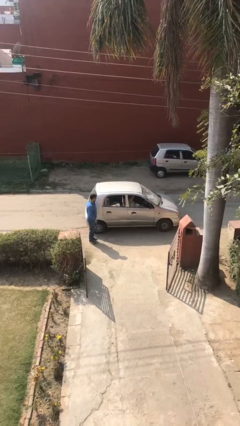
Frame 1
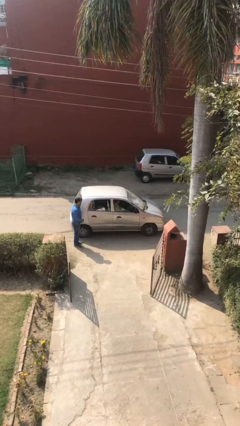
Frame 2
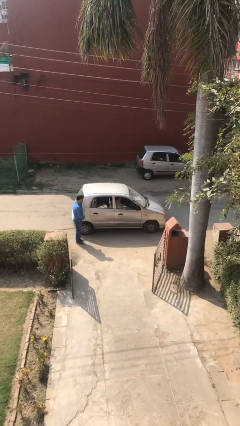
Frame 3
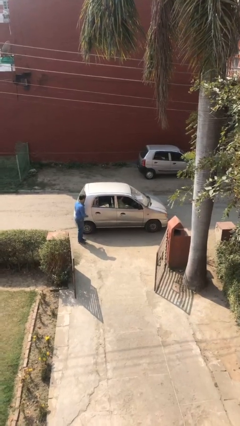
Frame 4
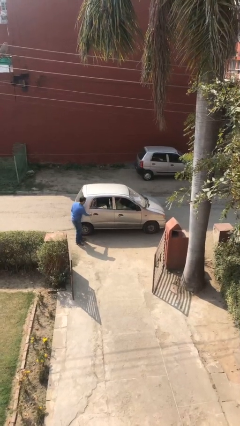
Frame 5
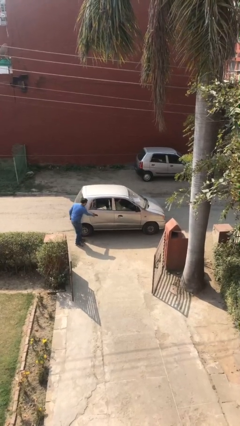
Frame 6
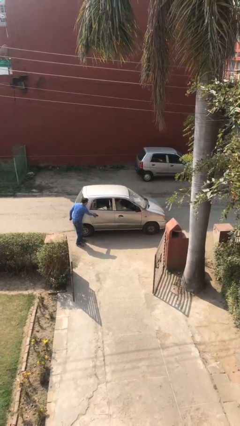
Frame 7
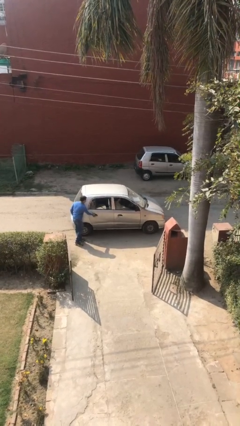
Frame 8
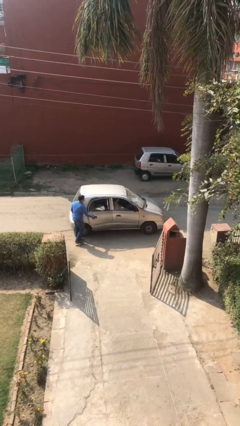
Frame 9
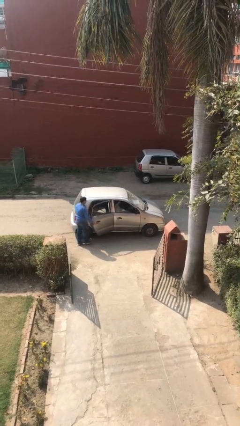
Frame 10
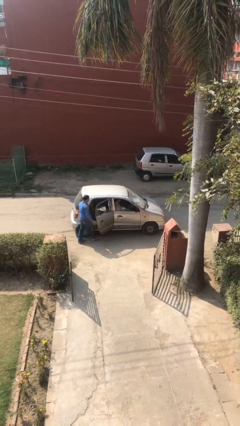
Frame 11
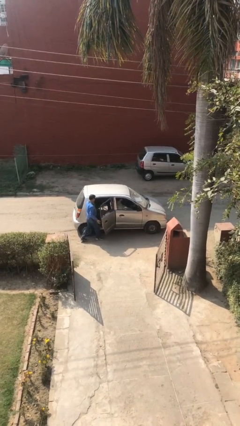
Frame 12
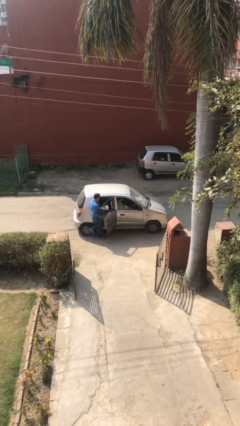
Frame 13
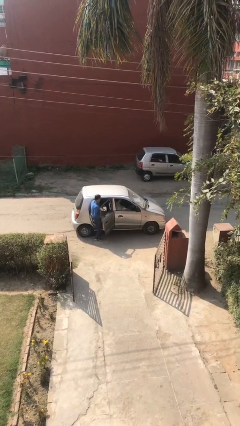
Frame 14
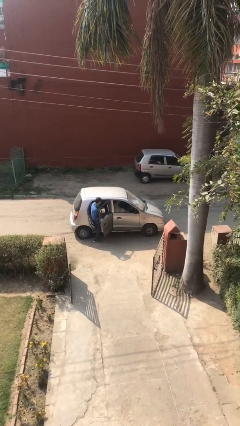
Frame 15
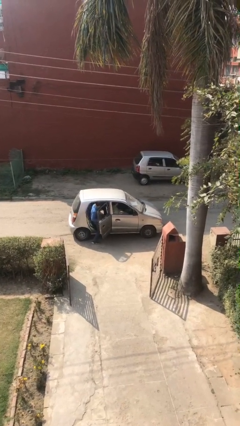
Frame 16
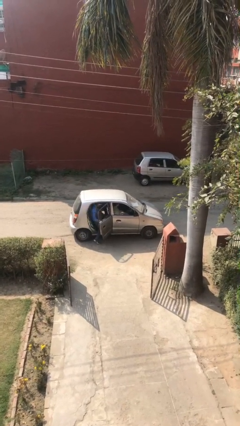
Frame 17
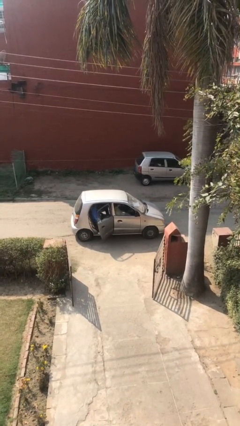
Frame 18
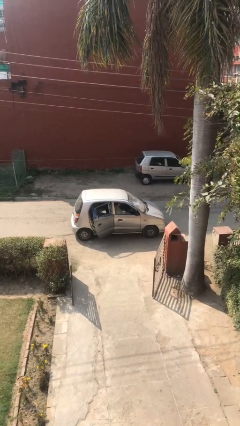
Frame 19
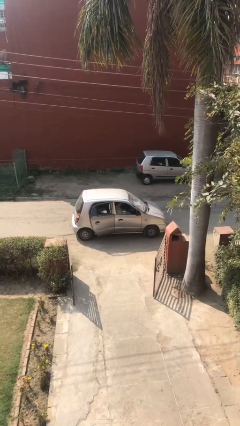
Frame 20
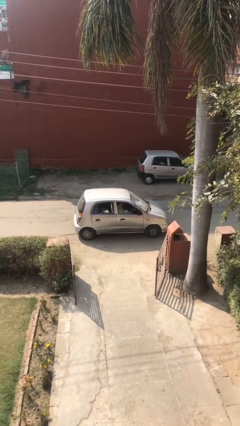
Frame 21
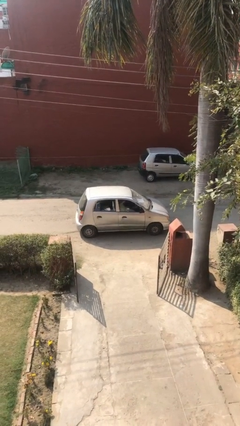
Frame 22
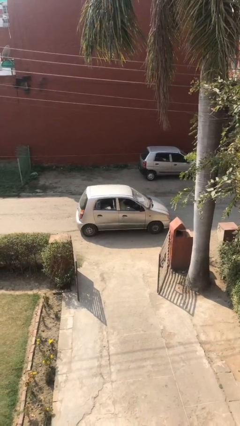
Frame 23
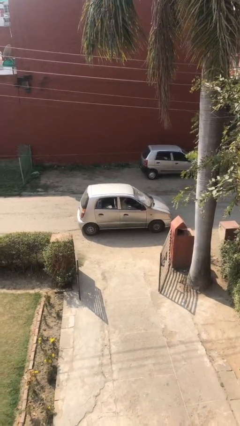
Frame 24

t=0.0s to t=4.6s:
car picks up person

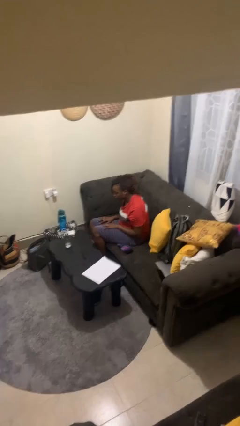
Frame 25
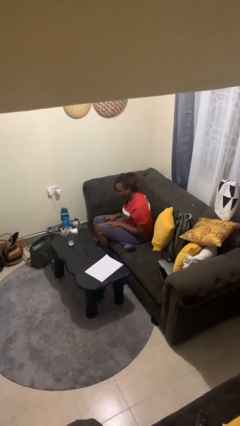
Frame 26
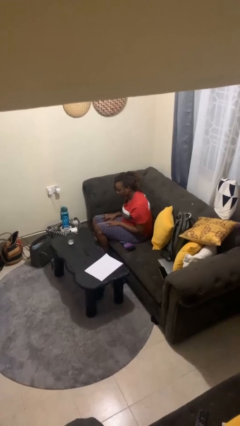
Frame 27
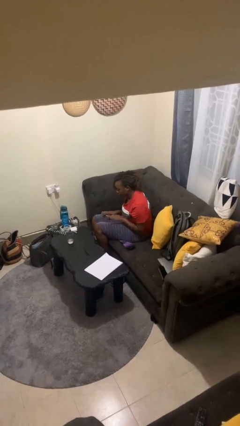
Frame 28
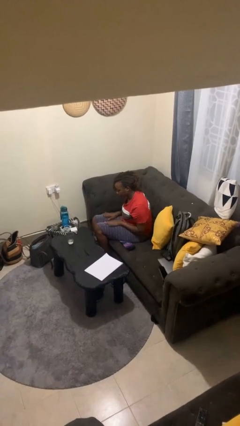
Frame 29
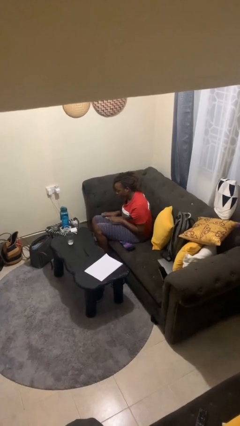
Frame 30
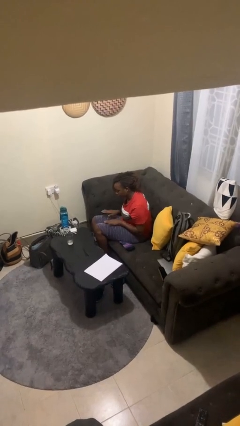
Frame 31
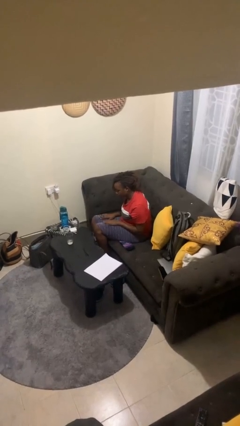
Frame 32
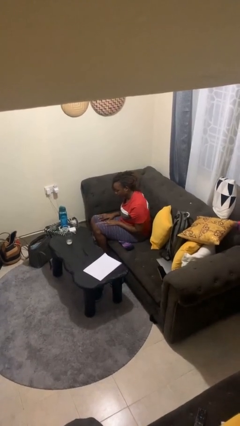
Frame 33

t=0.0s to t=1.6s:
person slaps hands on thighs

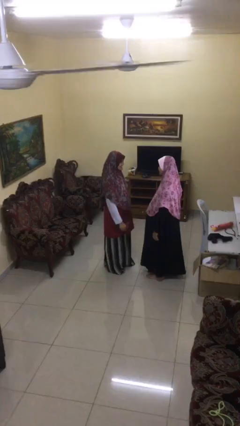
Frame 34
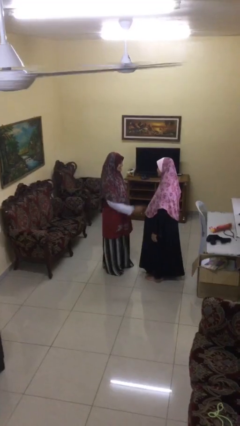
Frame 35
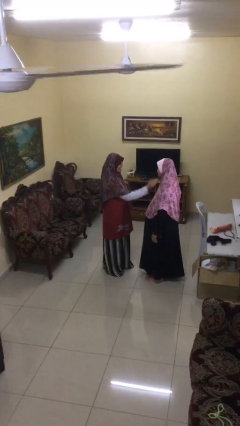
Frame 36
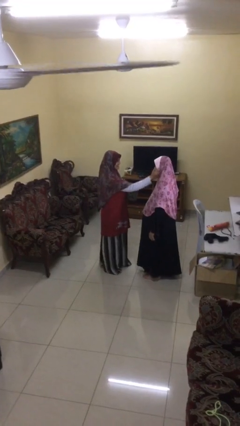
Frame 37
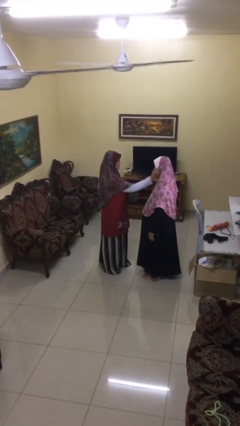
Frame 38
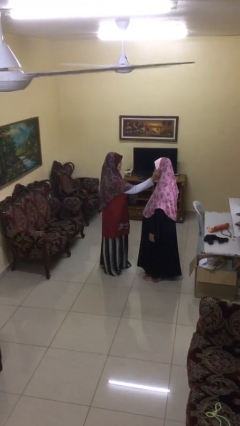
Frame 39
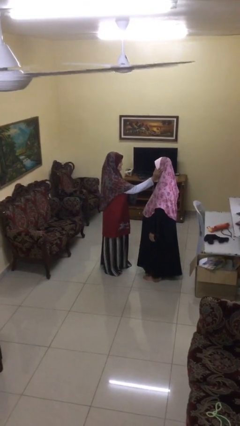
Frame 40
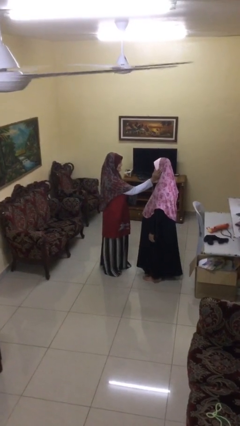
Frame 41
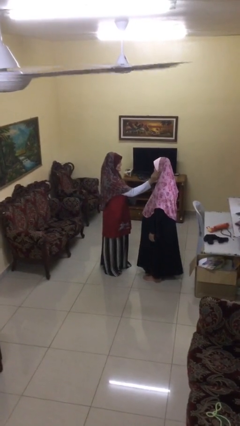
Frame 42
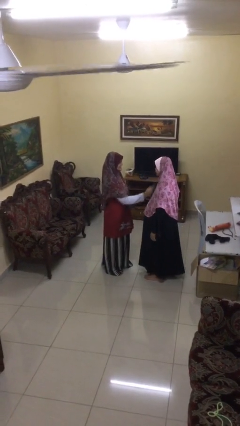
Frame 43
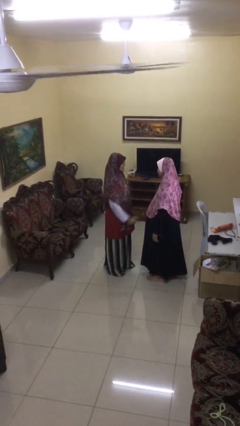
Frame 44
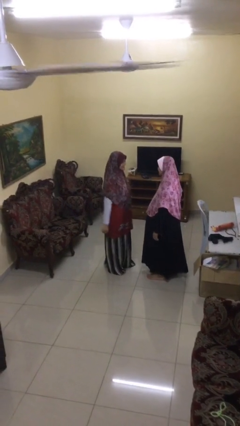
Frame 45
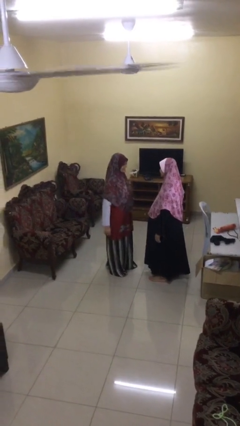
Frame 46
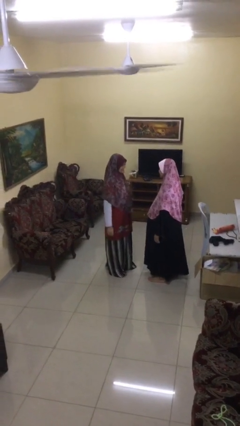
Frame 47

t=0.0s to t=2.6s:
person touches face of person

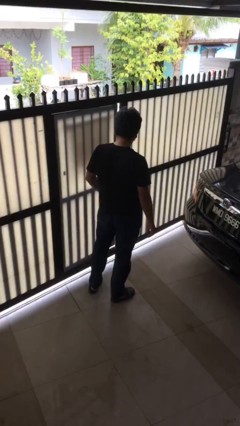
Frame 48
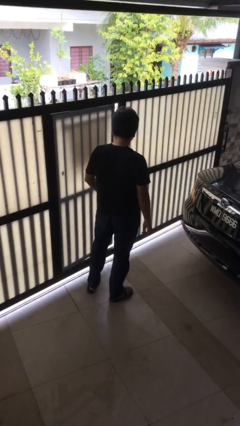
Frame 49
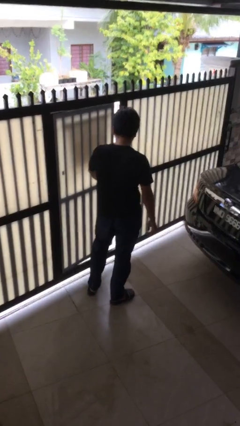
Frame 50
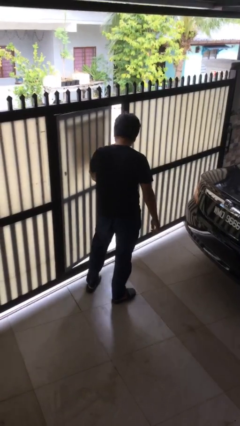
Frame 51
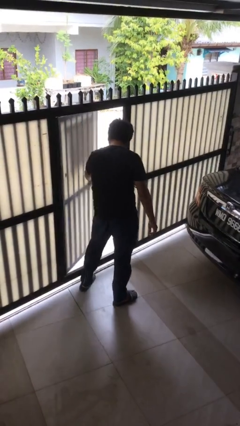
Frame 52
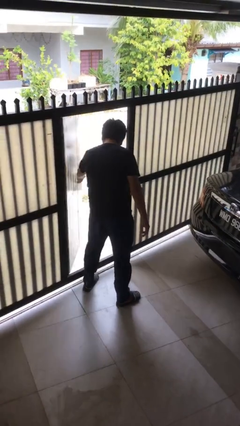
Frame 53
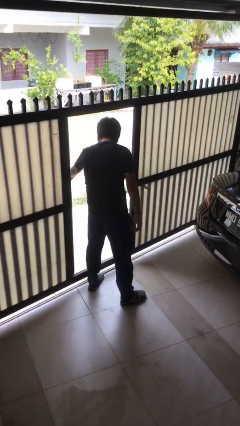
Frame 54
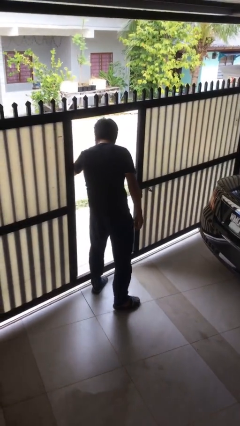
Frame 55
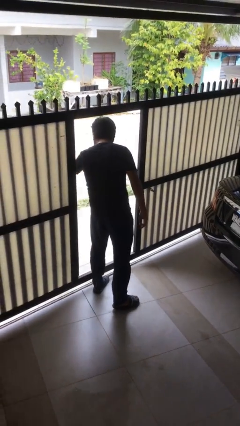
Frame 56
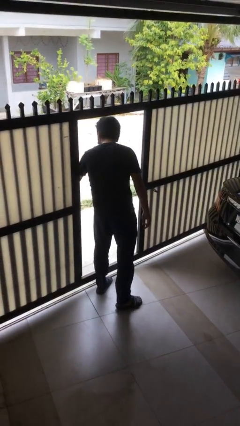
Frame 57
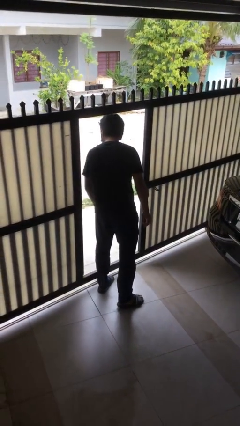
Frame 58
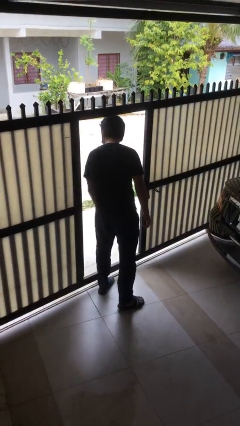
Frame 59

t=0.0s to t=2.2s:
person opens gate

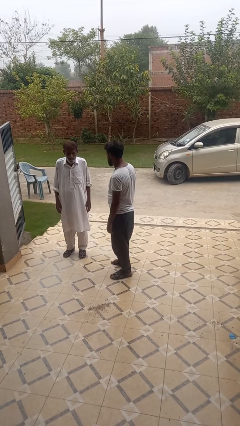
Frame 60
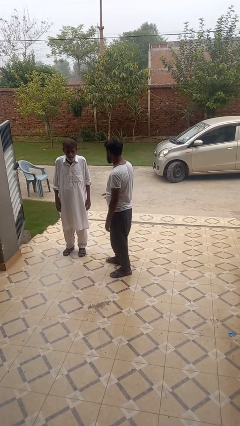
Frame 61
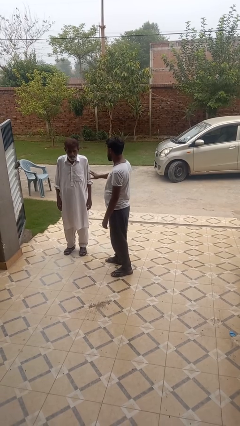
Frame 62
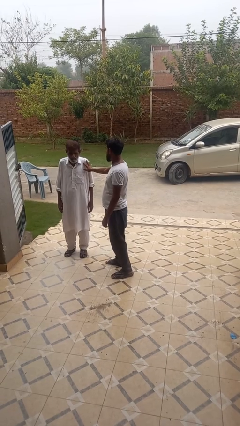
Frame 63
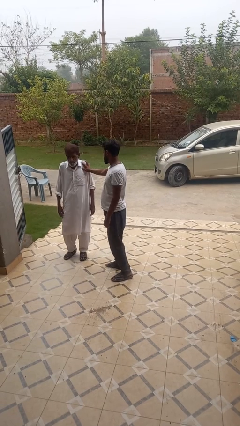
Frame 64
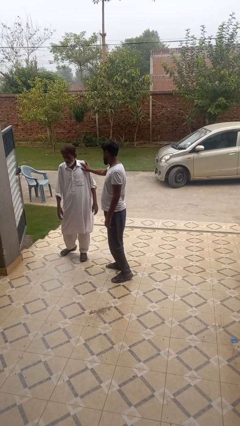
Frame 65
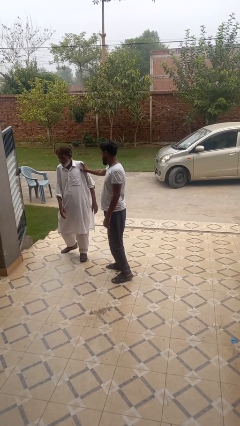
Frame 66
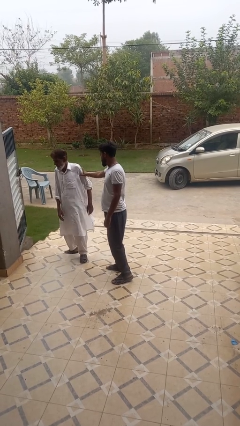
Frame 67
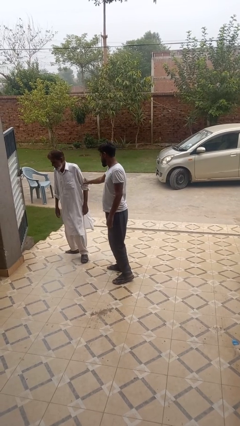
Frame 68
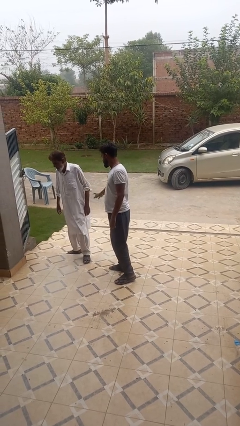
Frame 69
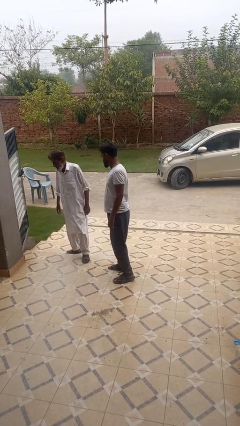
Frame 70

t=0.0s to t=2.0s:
person shoves person

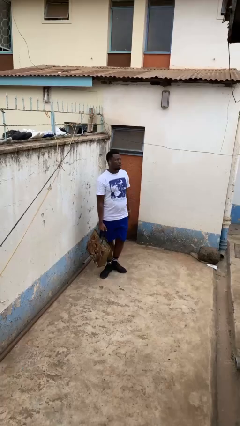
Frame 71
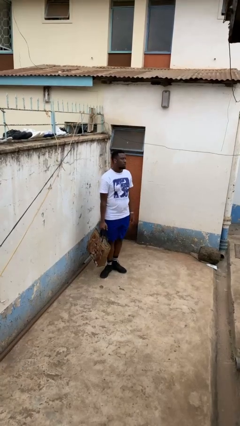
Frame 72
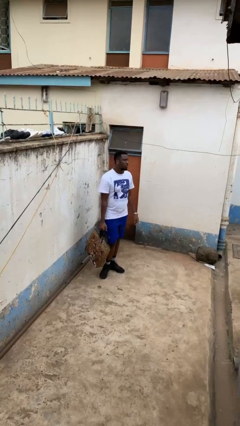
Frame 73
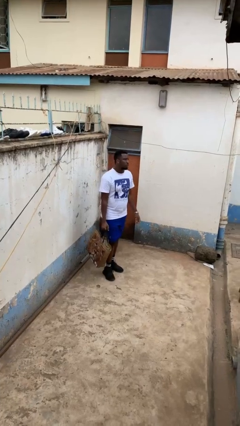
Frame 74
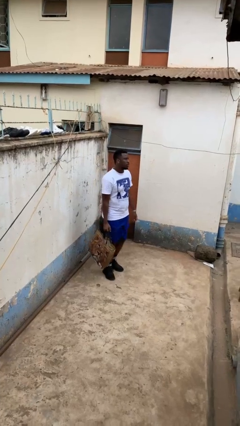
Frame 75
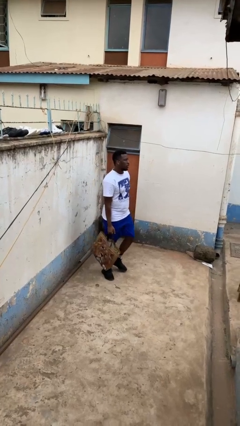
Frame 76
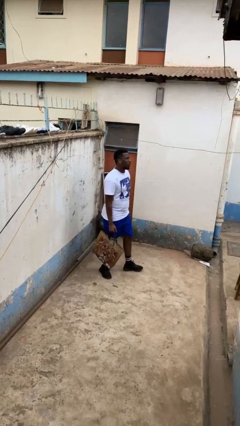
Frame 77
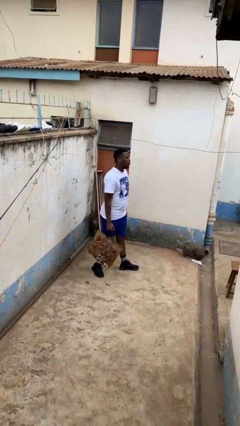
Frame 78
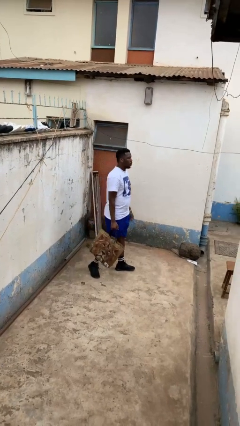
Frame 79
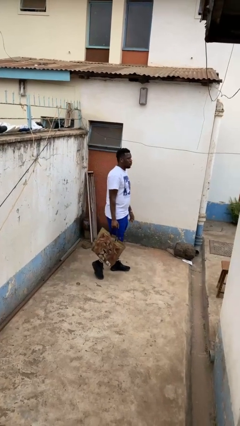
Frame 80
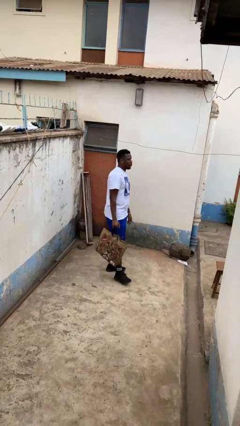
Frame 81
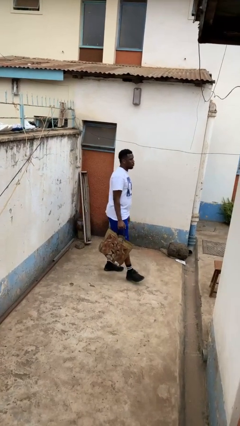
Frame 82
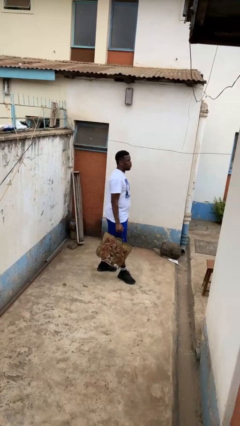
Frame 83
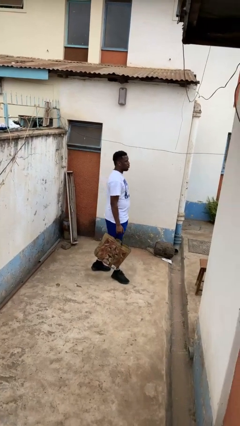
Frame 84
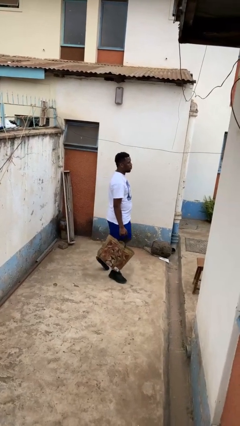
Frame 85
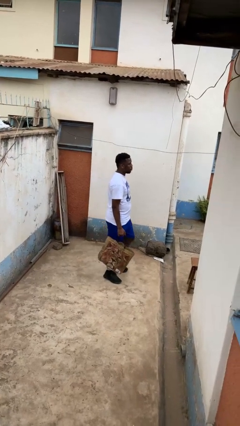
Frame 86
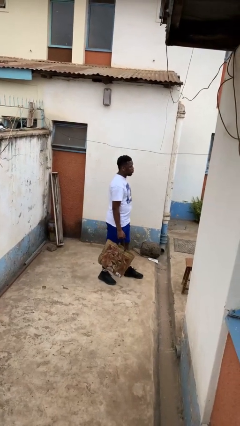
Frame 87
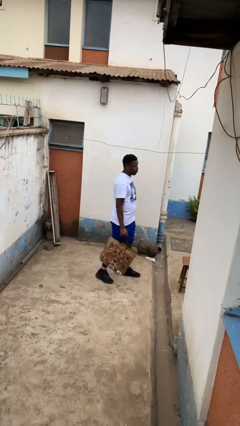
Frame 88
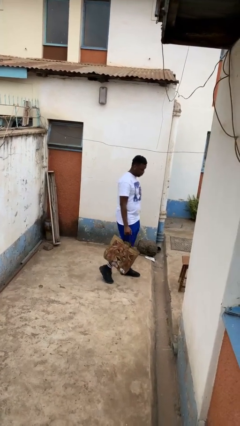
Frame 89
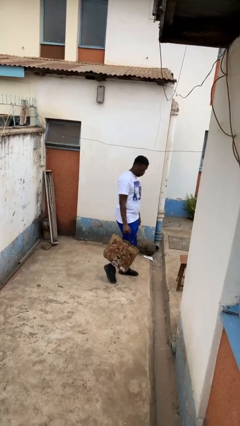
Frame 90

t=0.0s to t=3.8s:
person carries groceries

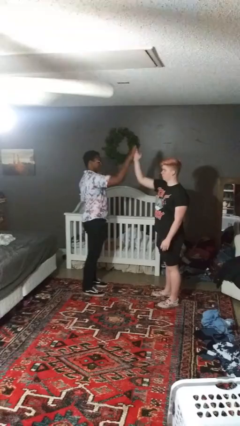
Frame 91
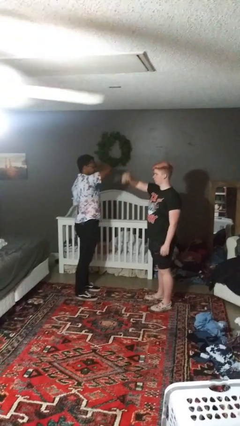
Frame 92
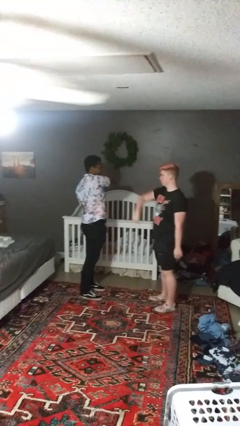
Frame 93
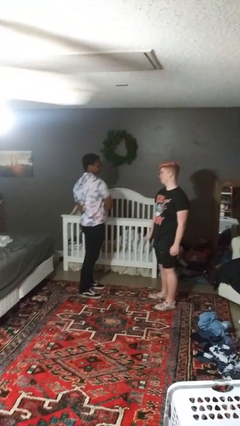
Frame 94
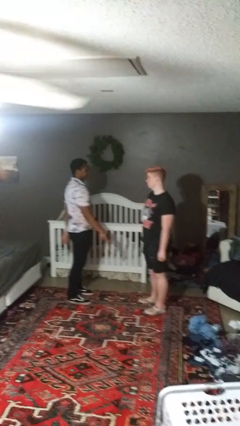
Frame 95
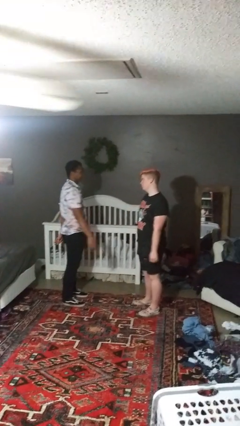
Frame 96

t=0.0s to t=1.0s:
person highfives hand
